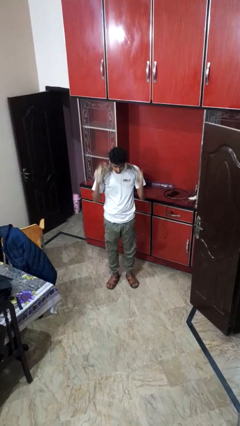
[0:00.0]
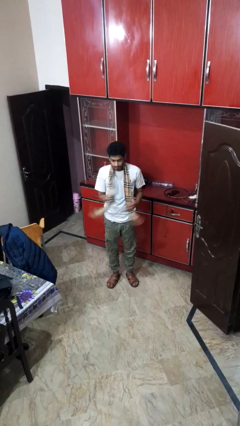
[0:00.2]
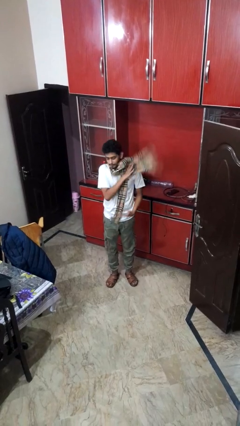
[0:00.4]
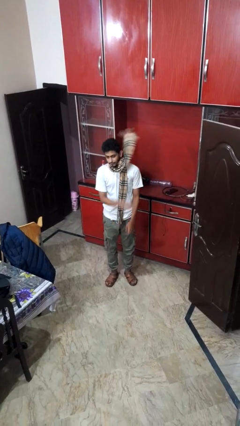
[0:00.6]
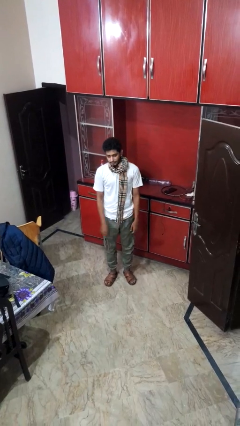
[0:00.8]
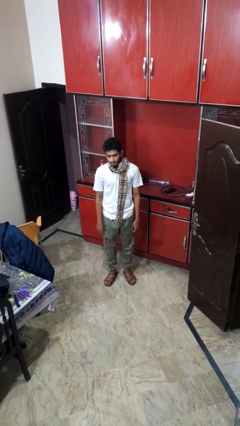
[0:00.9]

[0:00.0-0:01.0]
person puts on scarf

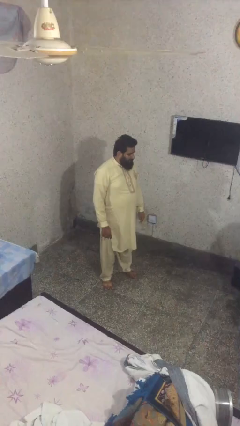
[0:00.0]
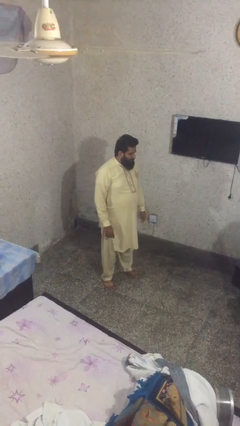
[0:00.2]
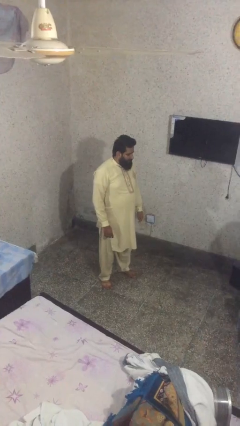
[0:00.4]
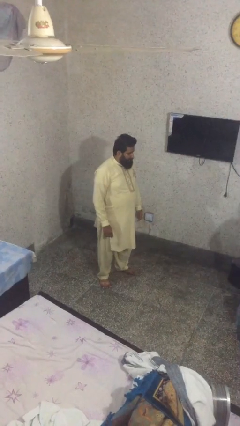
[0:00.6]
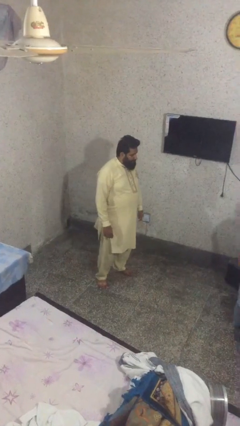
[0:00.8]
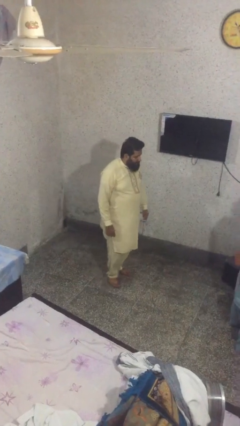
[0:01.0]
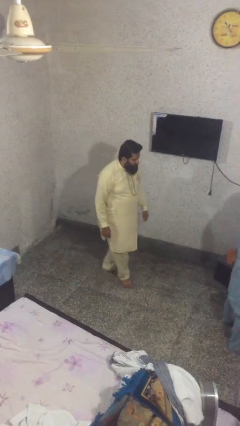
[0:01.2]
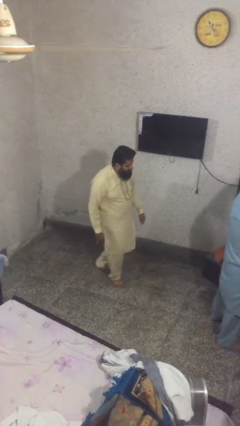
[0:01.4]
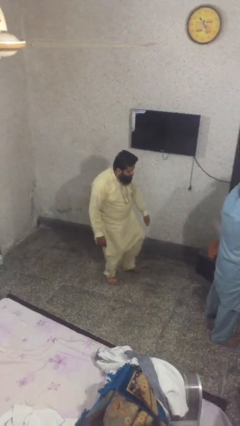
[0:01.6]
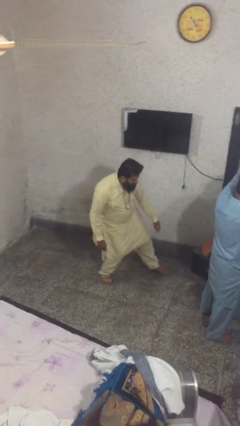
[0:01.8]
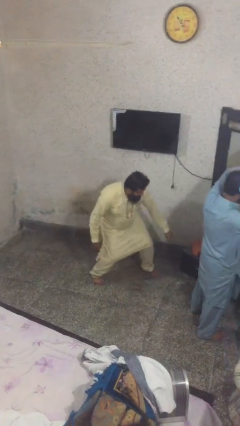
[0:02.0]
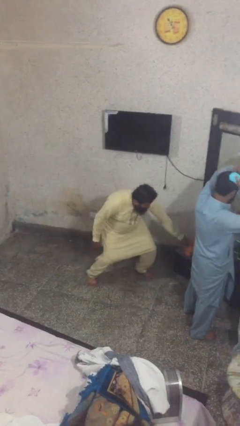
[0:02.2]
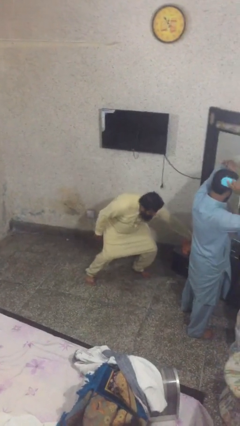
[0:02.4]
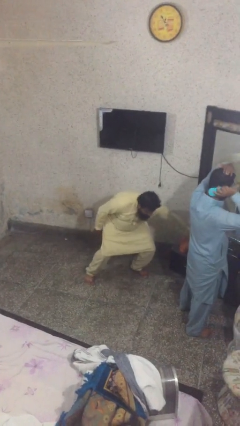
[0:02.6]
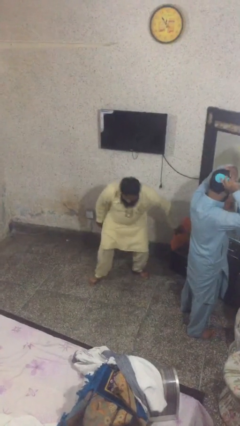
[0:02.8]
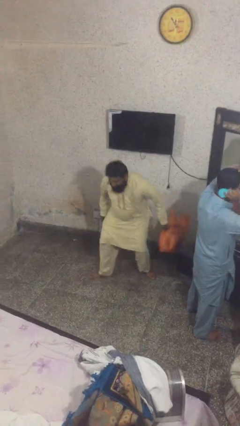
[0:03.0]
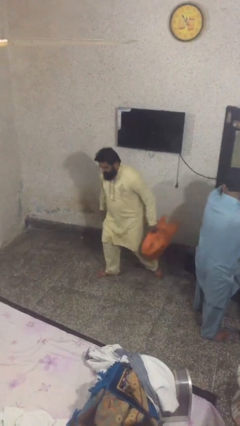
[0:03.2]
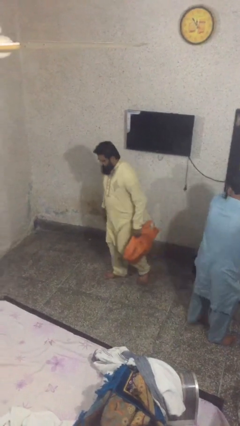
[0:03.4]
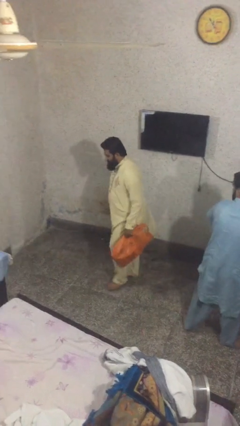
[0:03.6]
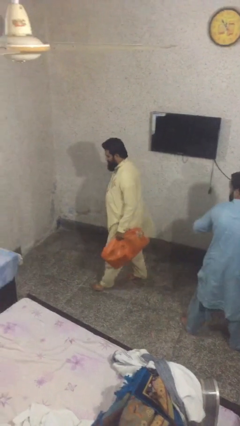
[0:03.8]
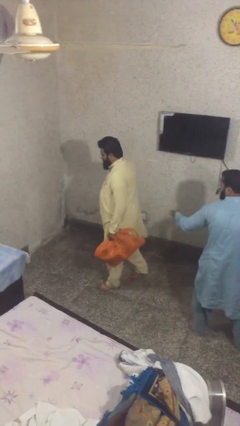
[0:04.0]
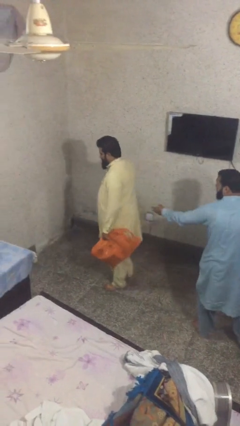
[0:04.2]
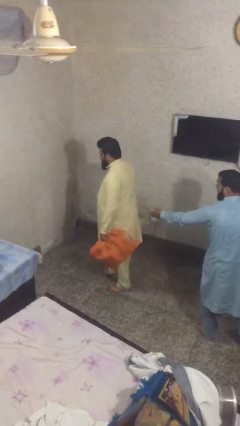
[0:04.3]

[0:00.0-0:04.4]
person steals object from person

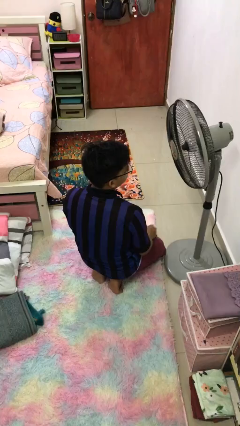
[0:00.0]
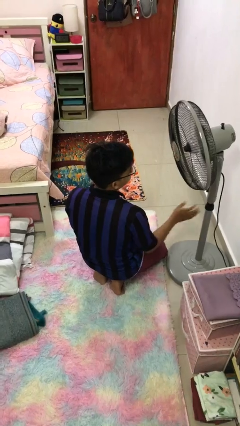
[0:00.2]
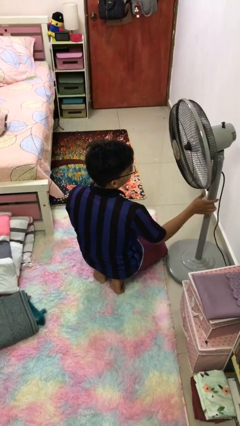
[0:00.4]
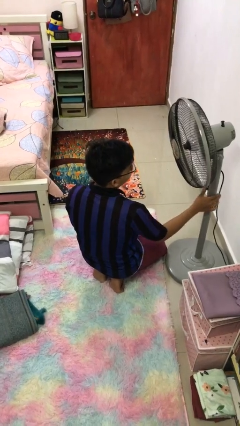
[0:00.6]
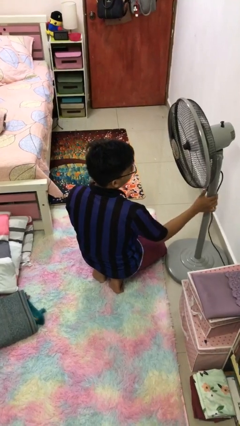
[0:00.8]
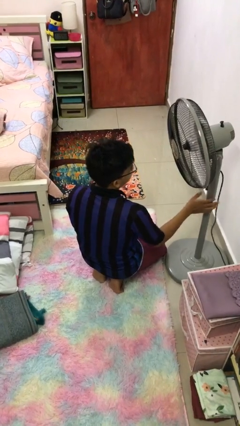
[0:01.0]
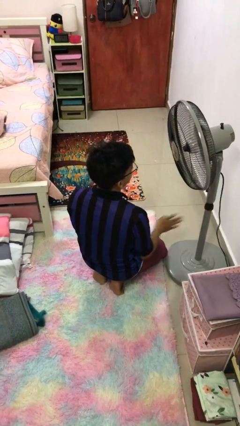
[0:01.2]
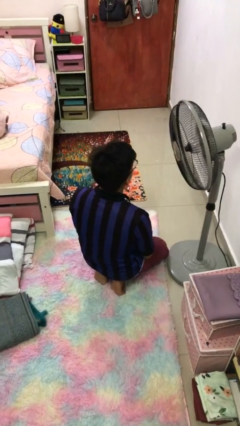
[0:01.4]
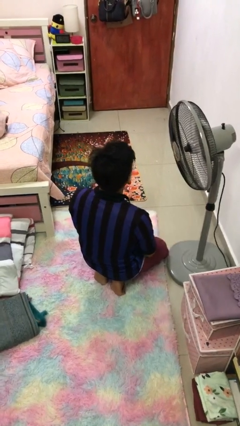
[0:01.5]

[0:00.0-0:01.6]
person turns off fan

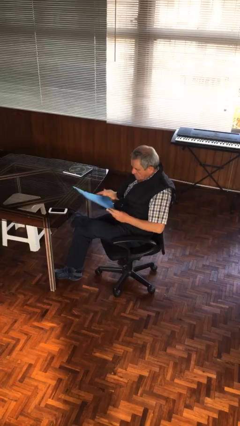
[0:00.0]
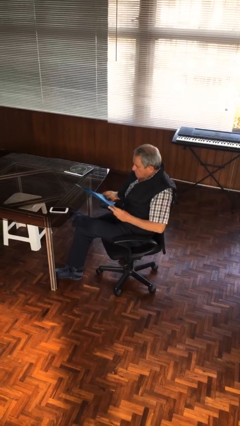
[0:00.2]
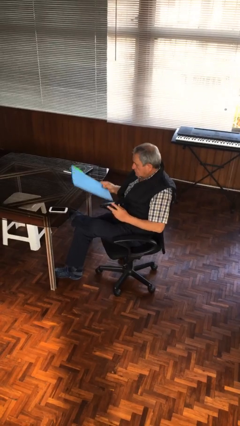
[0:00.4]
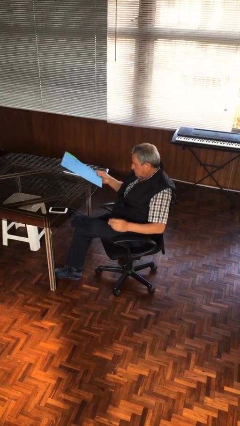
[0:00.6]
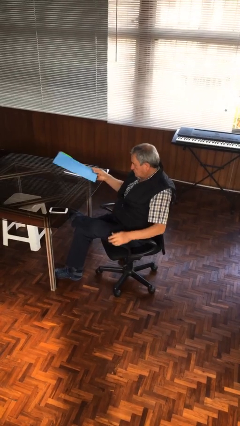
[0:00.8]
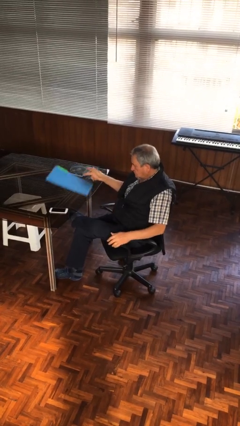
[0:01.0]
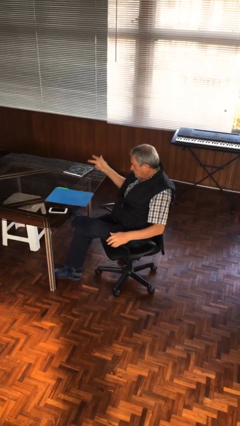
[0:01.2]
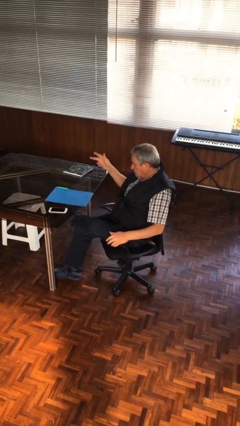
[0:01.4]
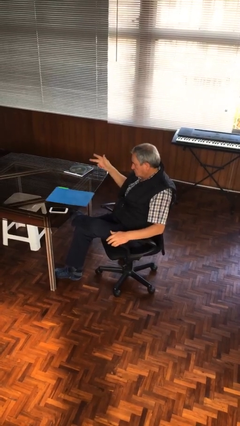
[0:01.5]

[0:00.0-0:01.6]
person puts down object on table

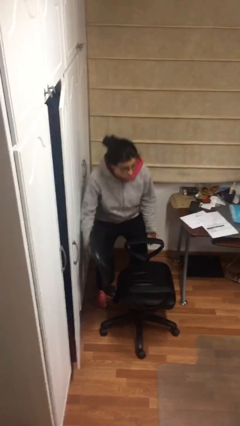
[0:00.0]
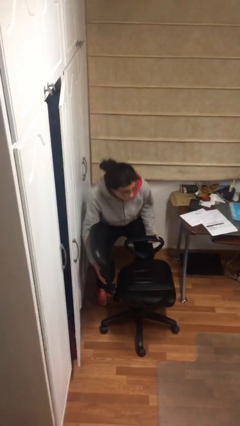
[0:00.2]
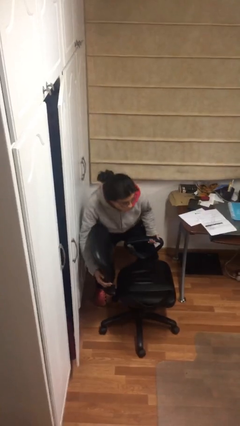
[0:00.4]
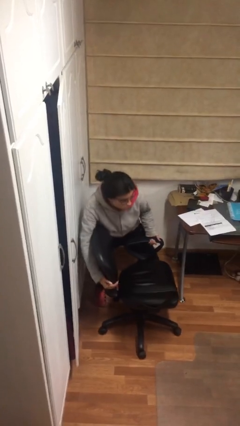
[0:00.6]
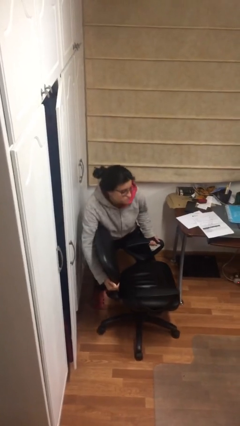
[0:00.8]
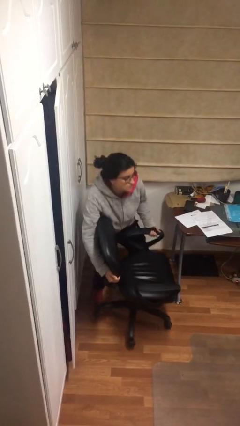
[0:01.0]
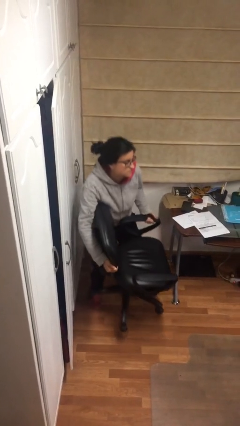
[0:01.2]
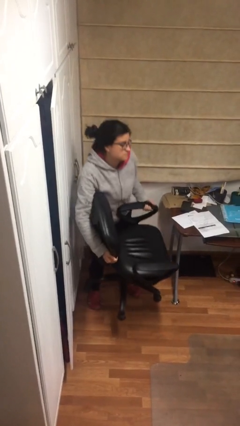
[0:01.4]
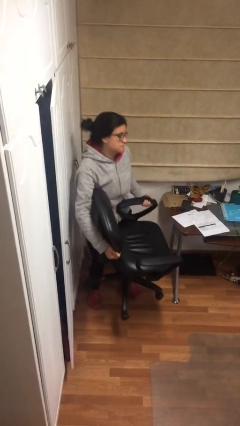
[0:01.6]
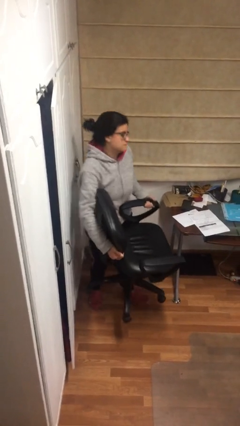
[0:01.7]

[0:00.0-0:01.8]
person picks up object from floor

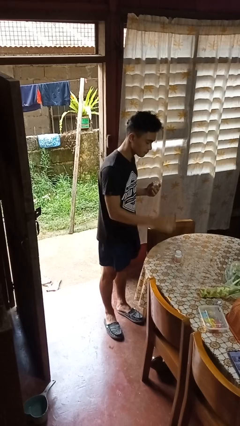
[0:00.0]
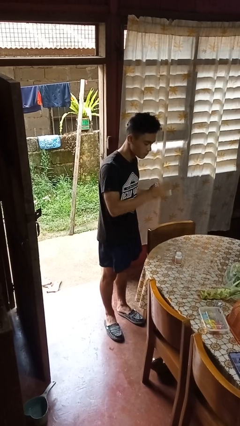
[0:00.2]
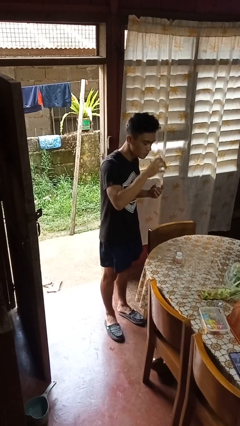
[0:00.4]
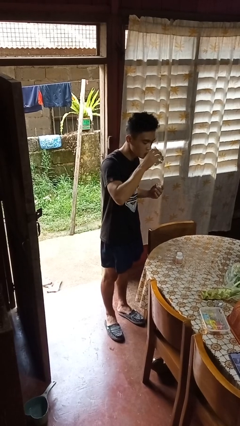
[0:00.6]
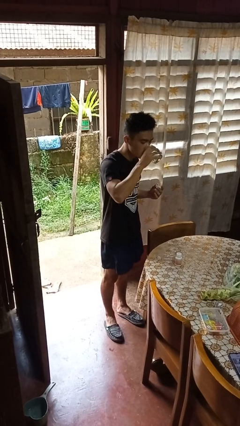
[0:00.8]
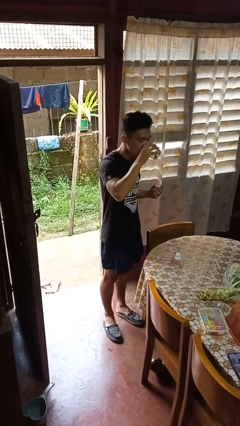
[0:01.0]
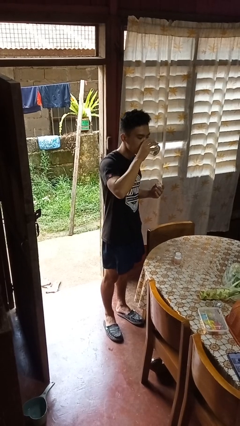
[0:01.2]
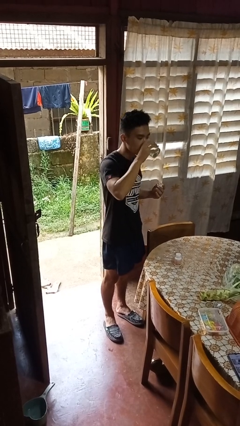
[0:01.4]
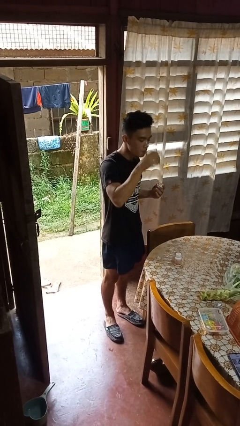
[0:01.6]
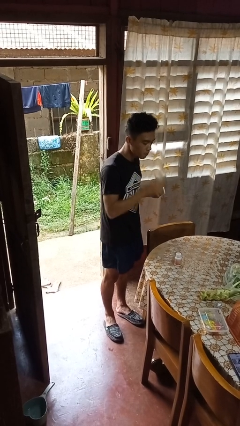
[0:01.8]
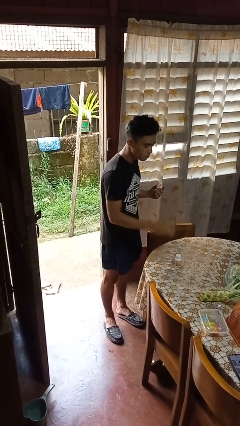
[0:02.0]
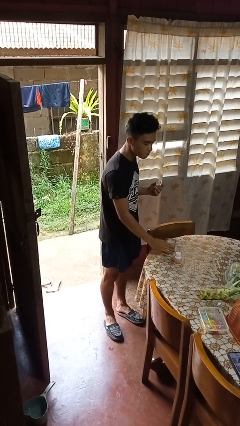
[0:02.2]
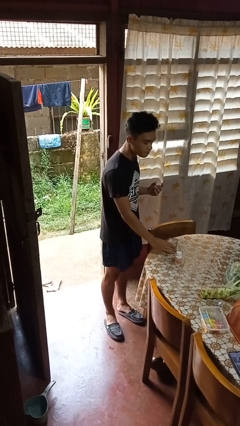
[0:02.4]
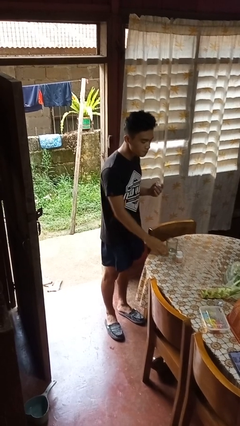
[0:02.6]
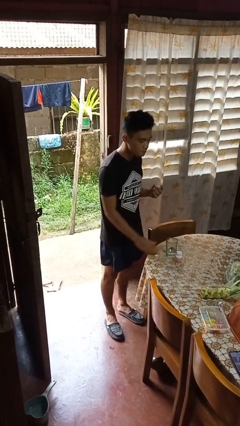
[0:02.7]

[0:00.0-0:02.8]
person drinks from cup

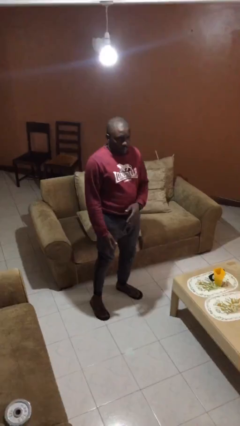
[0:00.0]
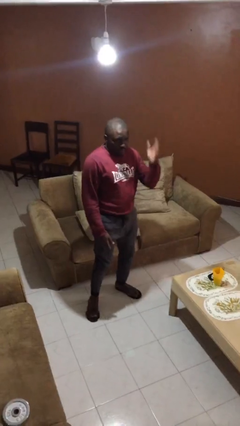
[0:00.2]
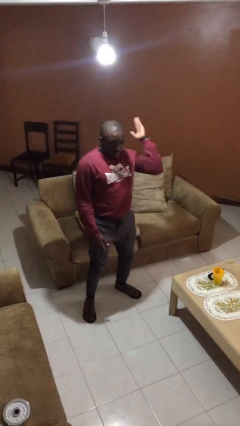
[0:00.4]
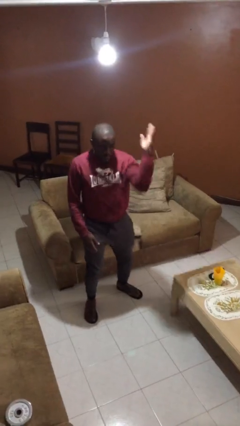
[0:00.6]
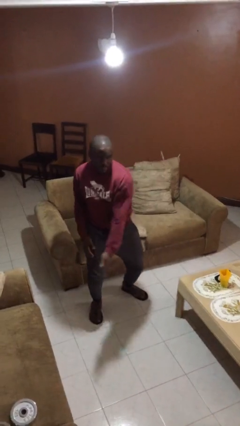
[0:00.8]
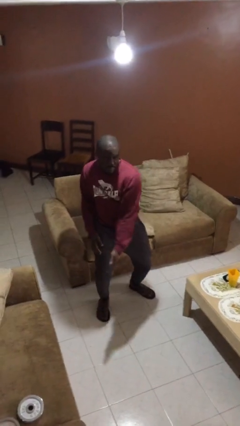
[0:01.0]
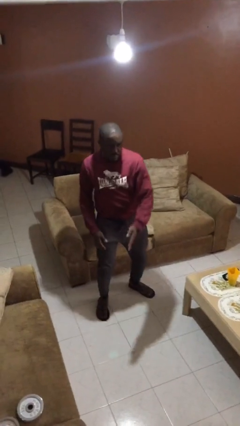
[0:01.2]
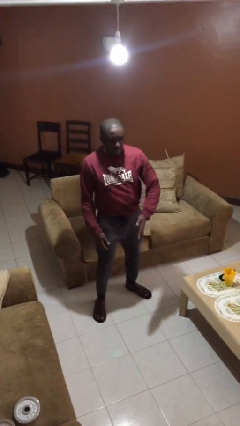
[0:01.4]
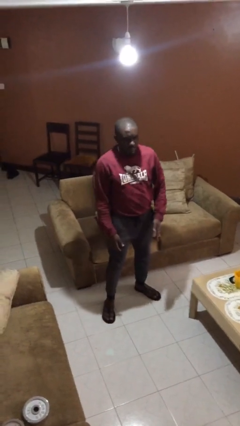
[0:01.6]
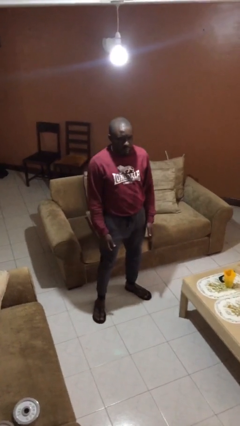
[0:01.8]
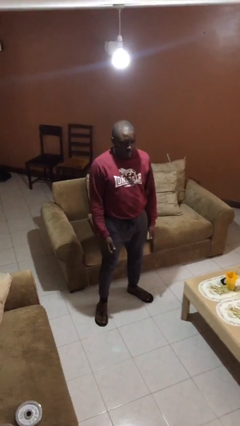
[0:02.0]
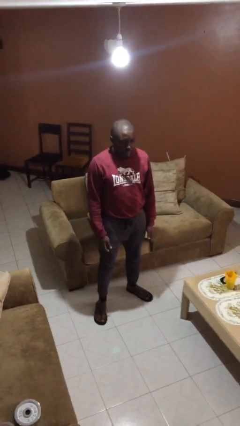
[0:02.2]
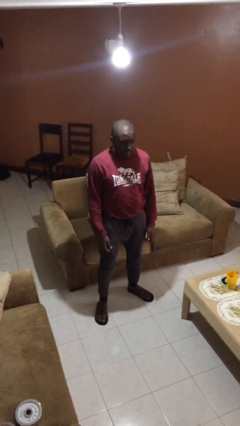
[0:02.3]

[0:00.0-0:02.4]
person karate chop

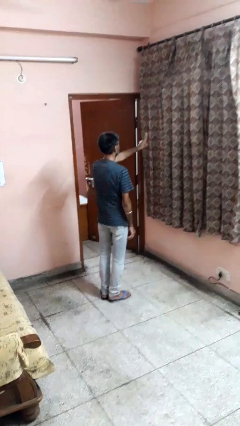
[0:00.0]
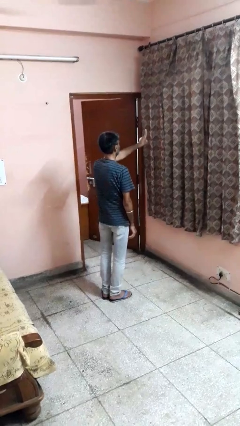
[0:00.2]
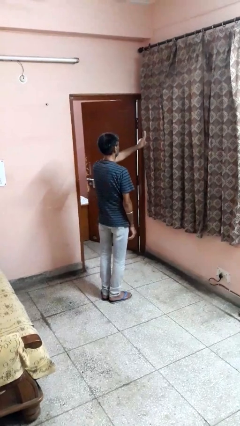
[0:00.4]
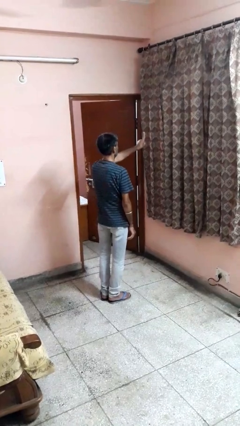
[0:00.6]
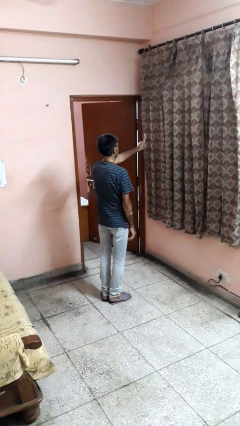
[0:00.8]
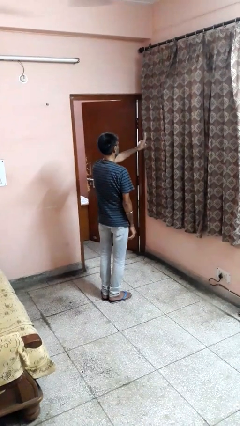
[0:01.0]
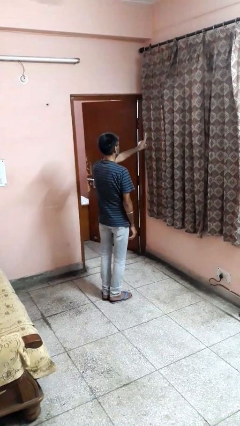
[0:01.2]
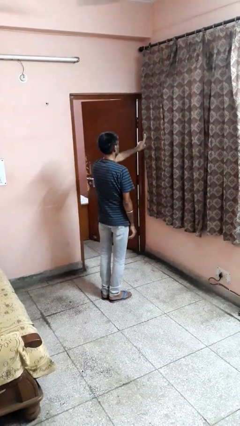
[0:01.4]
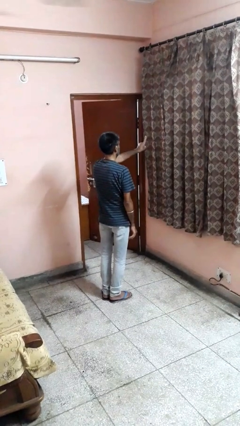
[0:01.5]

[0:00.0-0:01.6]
person gestures number one
